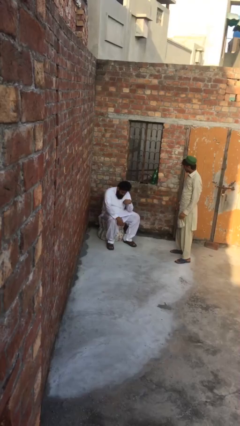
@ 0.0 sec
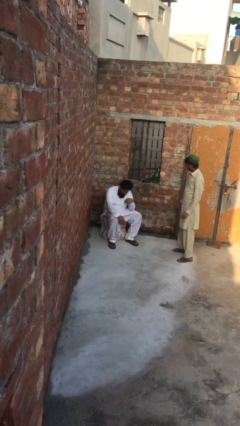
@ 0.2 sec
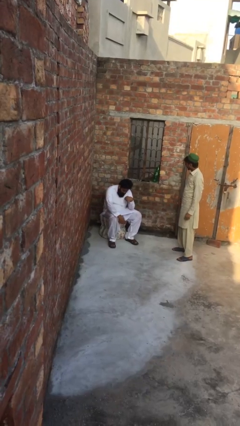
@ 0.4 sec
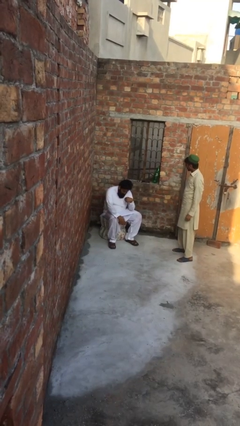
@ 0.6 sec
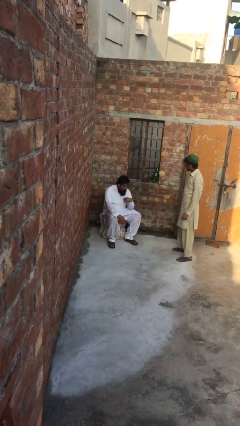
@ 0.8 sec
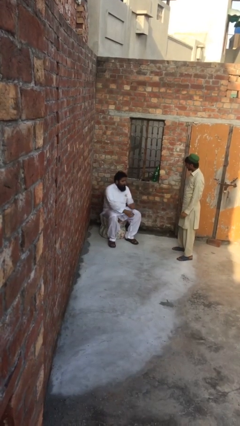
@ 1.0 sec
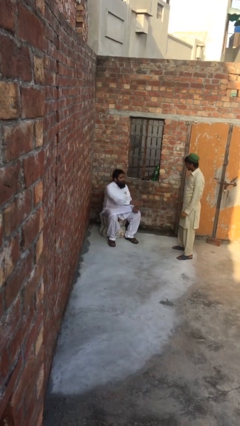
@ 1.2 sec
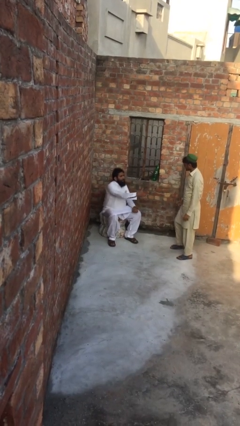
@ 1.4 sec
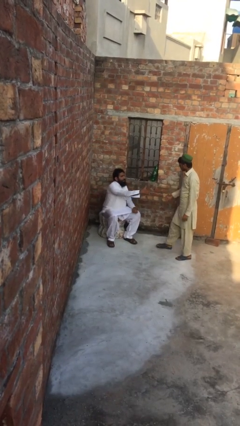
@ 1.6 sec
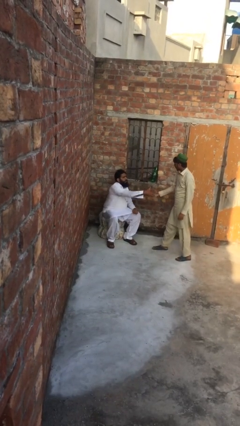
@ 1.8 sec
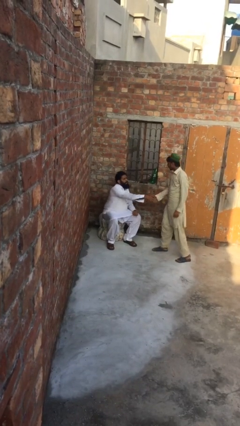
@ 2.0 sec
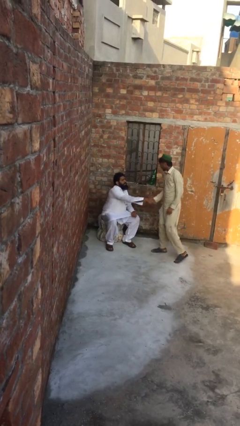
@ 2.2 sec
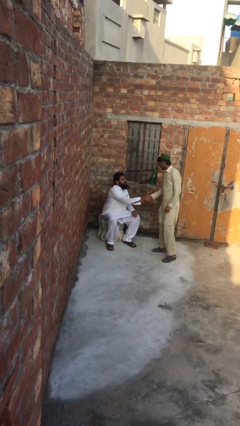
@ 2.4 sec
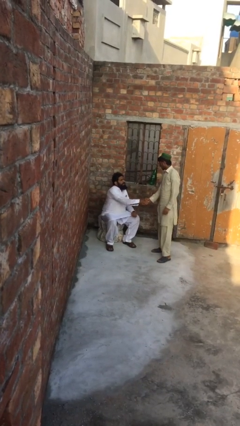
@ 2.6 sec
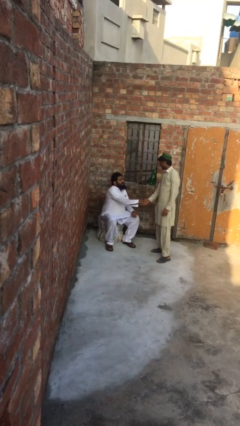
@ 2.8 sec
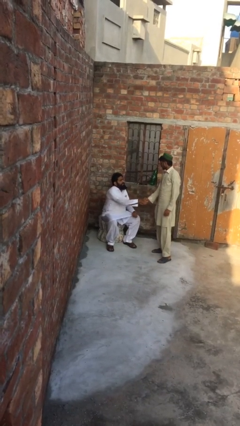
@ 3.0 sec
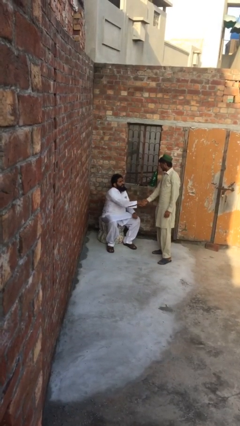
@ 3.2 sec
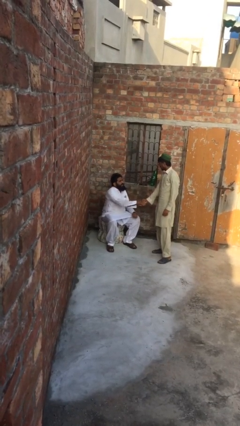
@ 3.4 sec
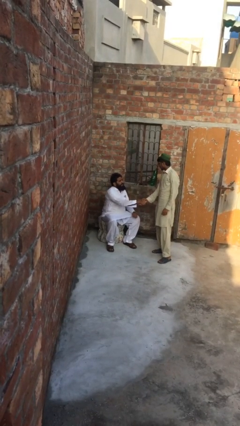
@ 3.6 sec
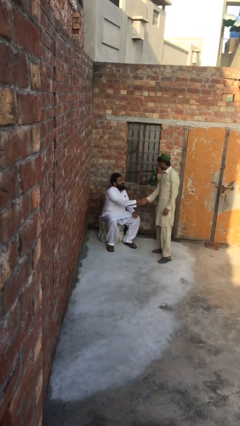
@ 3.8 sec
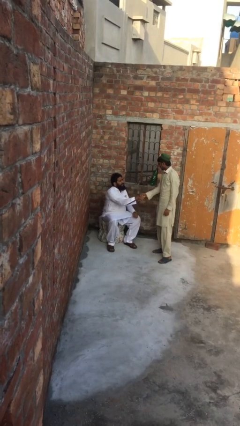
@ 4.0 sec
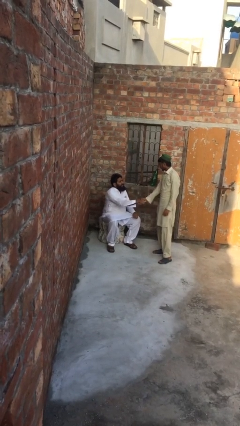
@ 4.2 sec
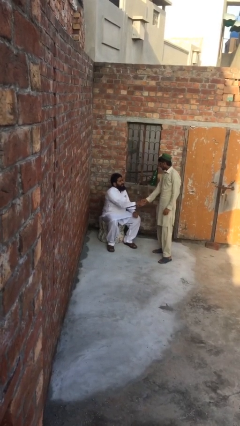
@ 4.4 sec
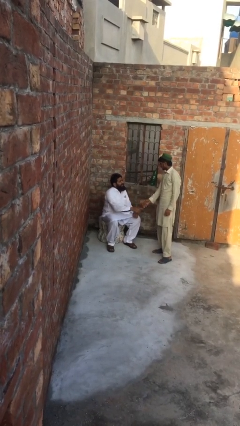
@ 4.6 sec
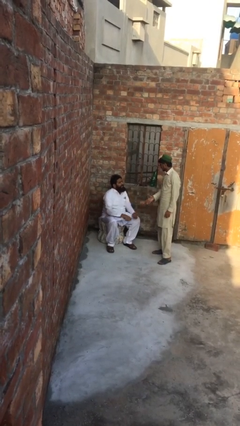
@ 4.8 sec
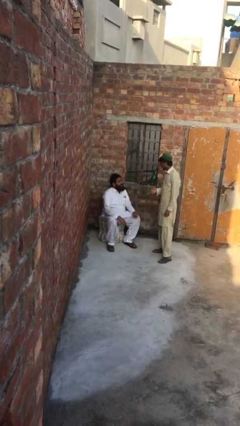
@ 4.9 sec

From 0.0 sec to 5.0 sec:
person shakes hand

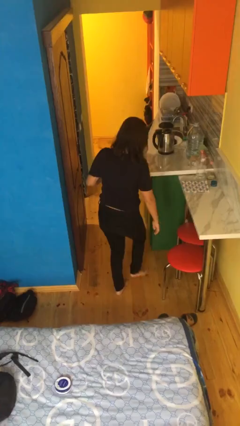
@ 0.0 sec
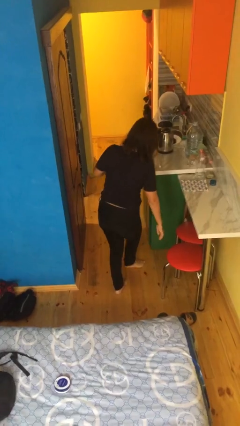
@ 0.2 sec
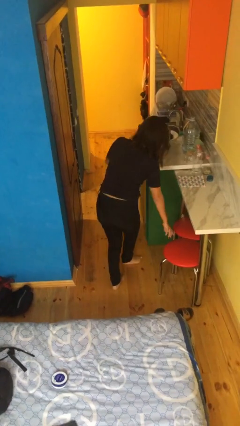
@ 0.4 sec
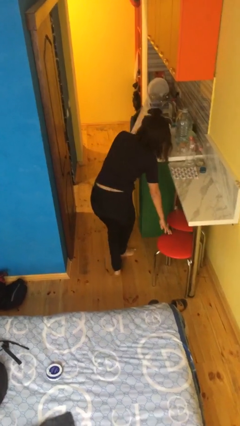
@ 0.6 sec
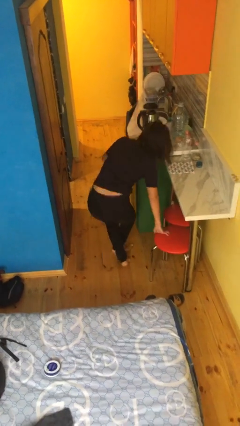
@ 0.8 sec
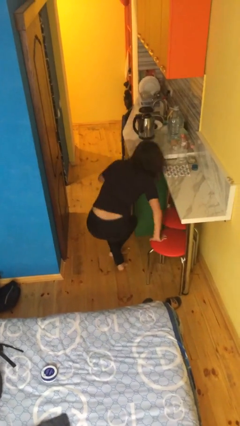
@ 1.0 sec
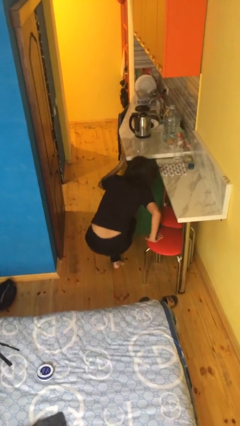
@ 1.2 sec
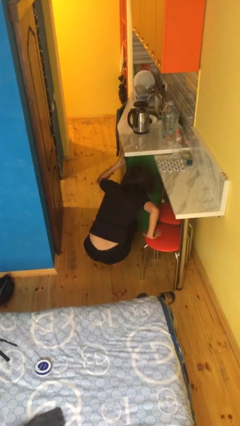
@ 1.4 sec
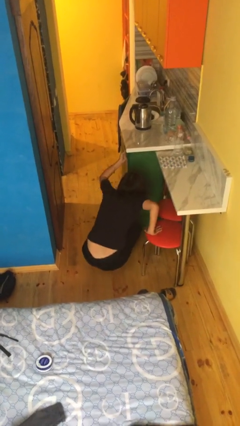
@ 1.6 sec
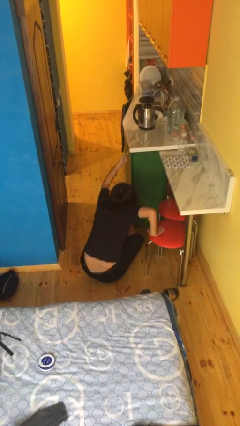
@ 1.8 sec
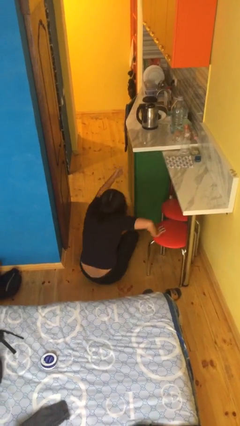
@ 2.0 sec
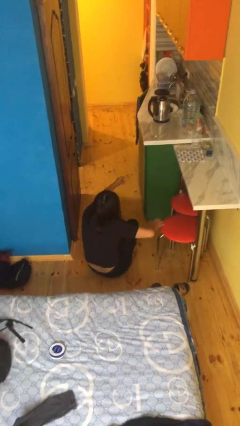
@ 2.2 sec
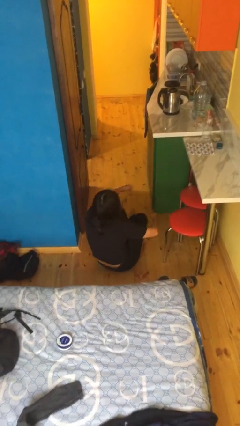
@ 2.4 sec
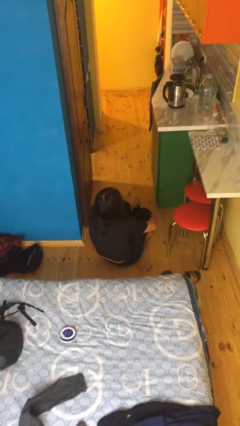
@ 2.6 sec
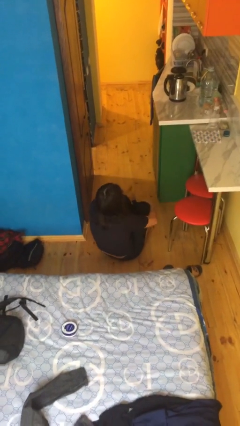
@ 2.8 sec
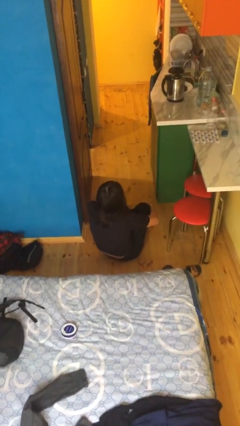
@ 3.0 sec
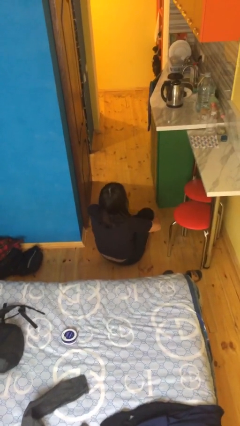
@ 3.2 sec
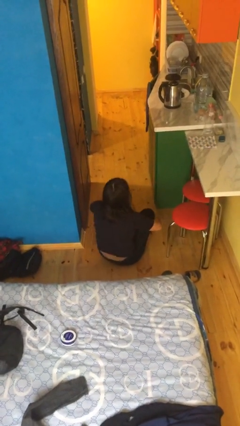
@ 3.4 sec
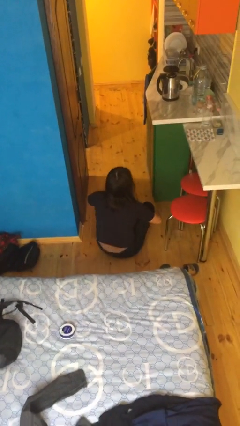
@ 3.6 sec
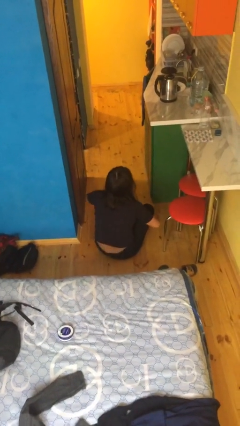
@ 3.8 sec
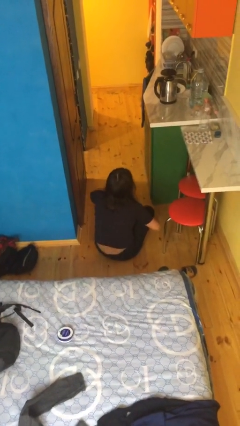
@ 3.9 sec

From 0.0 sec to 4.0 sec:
person sits crisscross

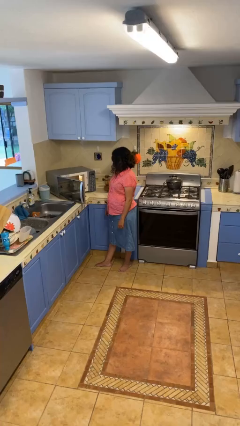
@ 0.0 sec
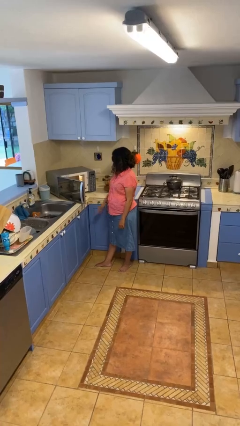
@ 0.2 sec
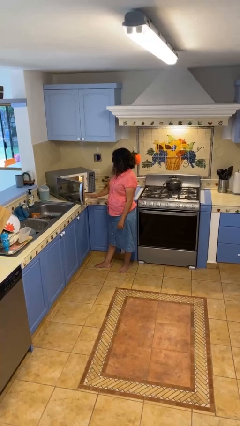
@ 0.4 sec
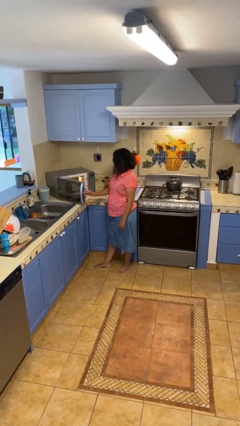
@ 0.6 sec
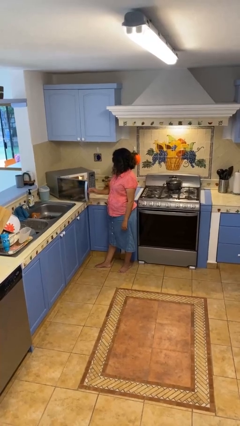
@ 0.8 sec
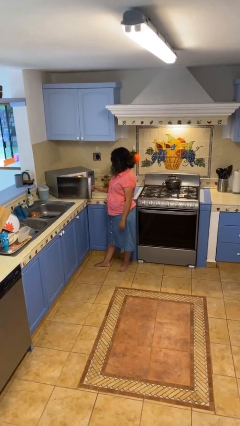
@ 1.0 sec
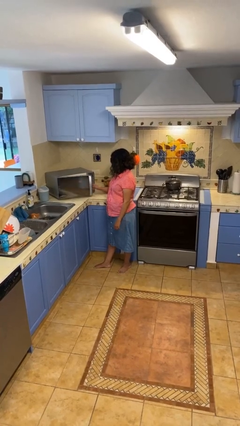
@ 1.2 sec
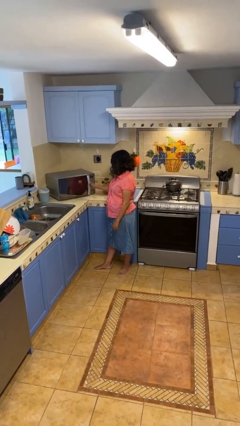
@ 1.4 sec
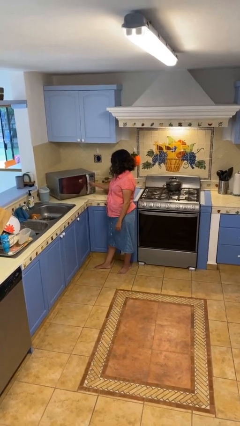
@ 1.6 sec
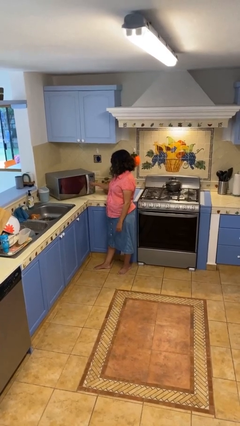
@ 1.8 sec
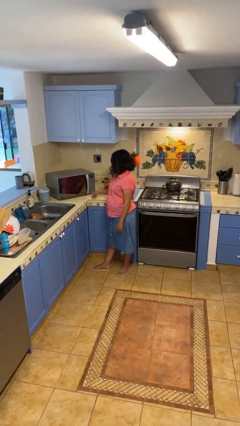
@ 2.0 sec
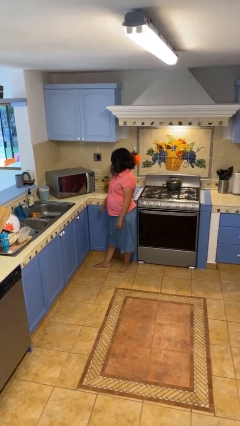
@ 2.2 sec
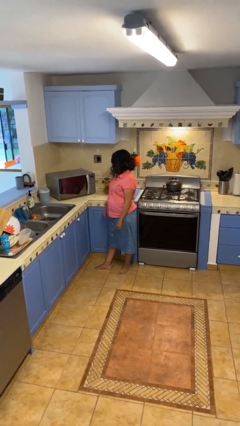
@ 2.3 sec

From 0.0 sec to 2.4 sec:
person closes microwave

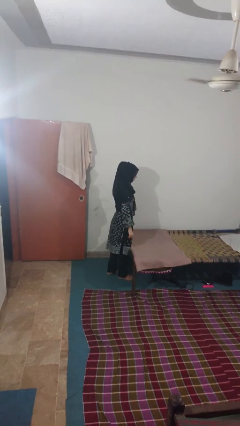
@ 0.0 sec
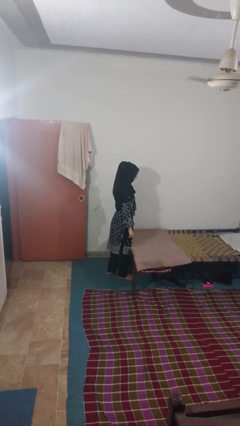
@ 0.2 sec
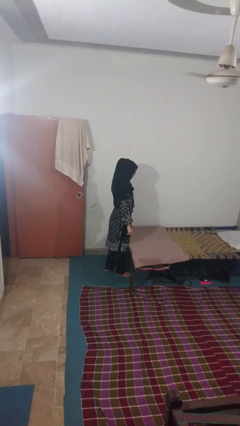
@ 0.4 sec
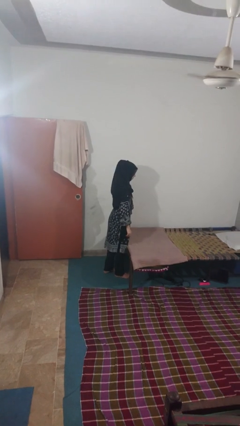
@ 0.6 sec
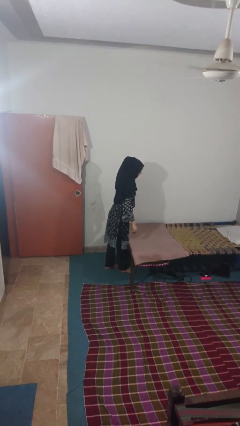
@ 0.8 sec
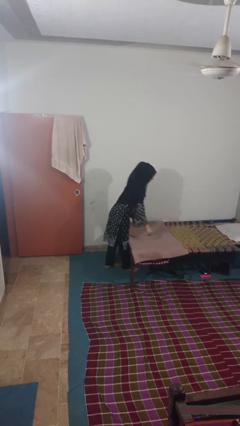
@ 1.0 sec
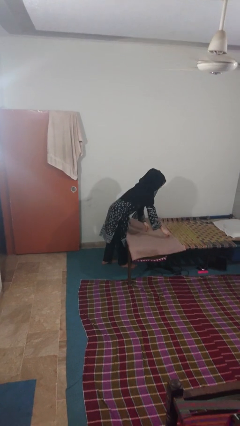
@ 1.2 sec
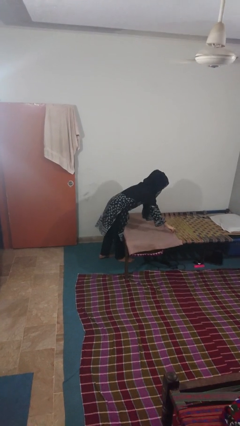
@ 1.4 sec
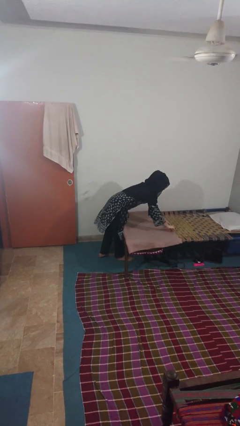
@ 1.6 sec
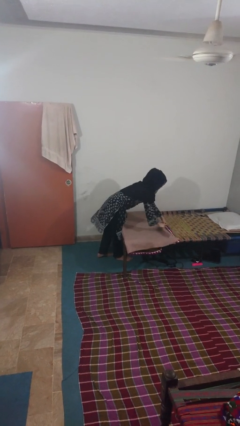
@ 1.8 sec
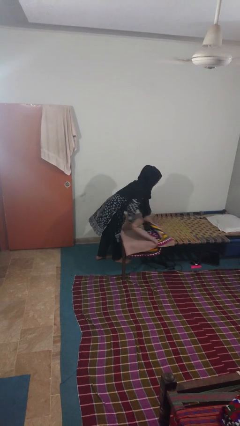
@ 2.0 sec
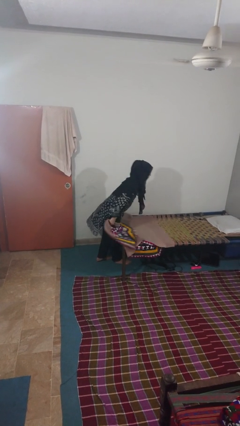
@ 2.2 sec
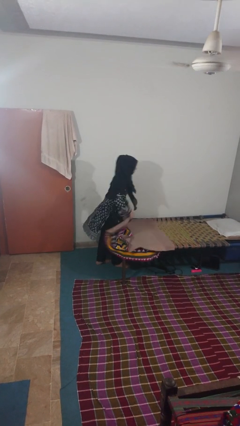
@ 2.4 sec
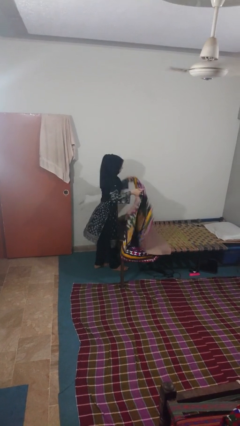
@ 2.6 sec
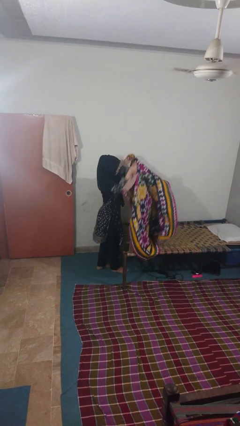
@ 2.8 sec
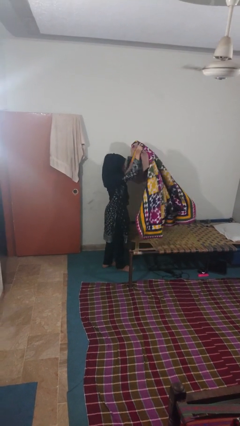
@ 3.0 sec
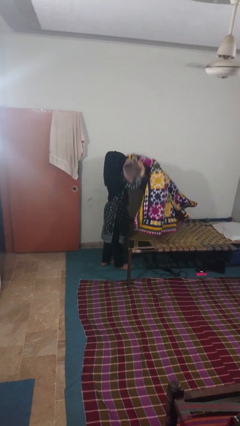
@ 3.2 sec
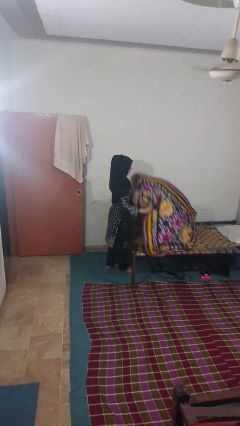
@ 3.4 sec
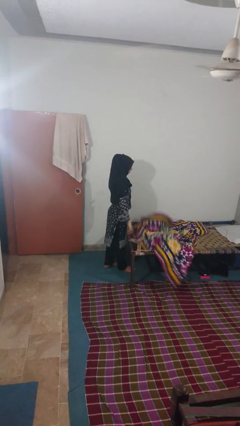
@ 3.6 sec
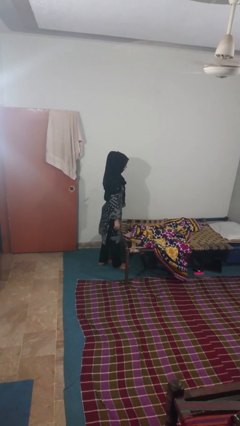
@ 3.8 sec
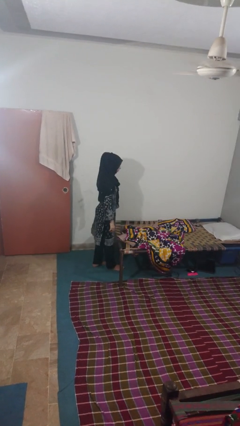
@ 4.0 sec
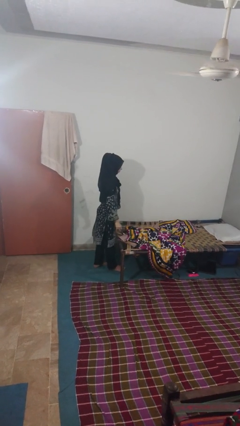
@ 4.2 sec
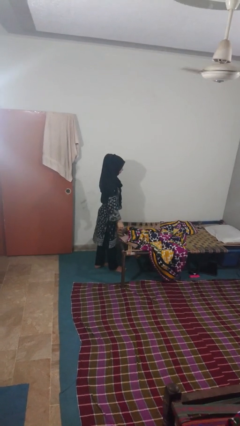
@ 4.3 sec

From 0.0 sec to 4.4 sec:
person unfolds blanket

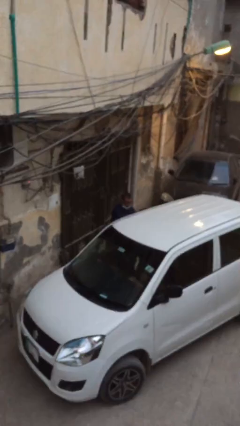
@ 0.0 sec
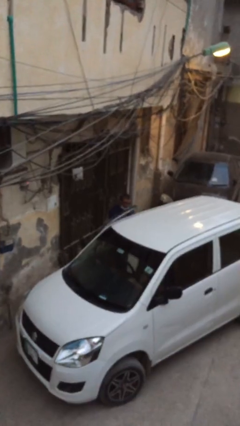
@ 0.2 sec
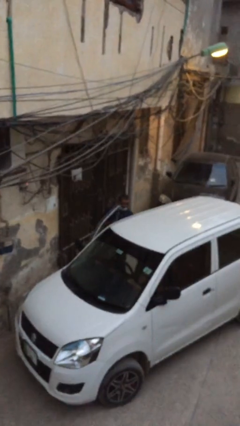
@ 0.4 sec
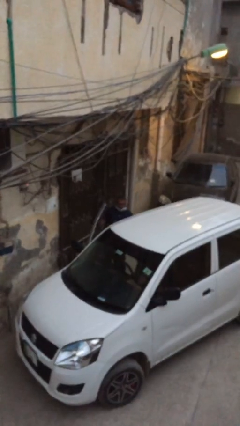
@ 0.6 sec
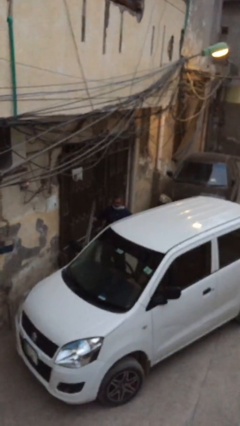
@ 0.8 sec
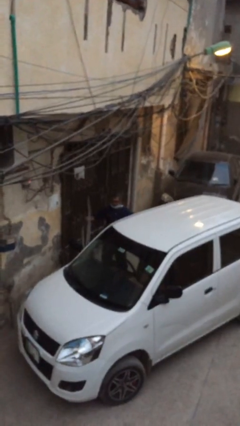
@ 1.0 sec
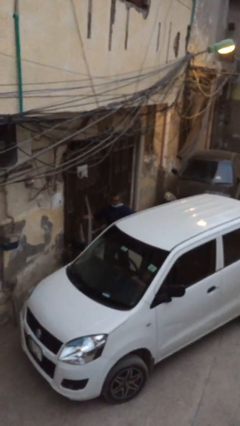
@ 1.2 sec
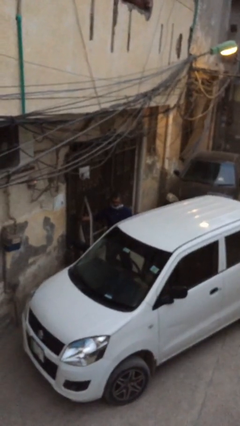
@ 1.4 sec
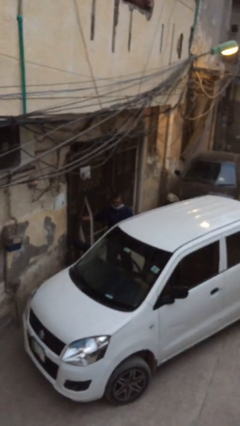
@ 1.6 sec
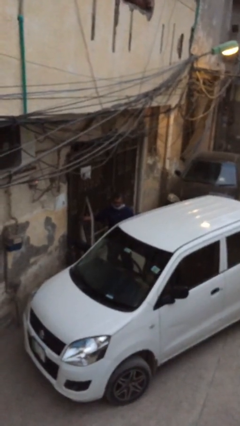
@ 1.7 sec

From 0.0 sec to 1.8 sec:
person opens car door
